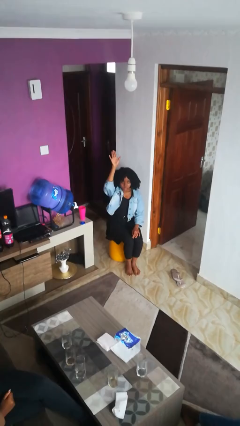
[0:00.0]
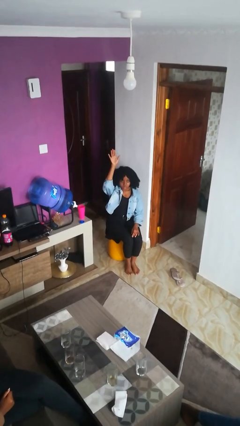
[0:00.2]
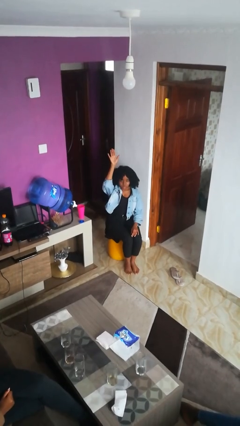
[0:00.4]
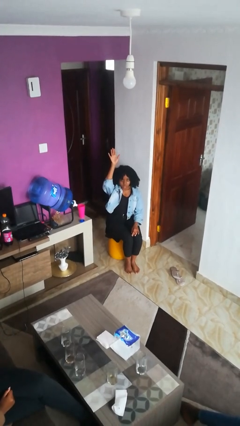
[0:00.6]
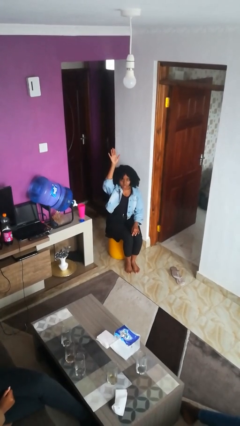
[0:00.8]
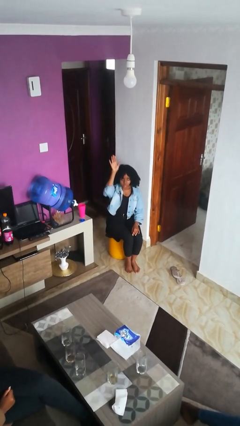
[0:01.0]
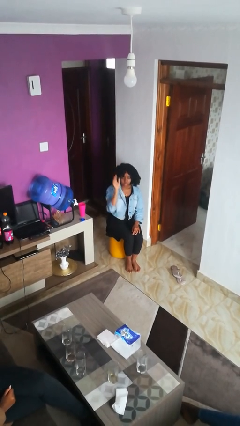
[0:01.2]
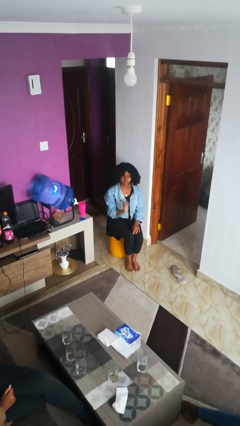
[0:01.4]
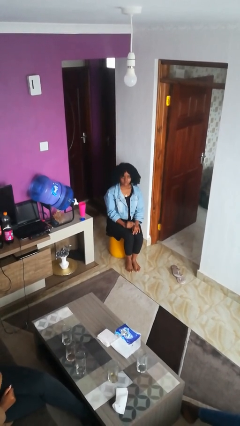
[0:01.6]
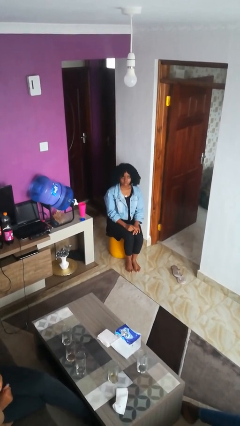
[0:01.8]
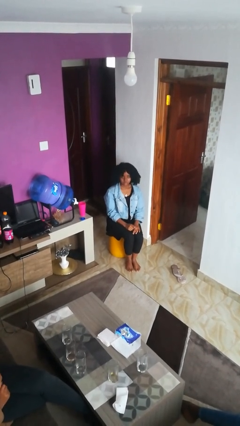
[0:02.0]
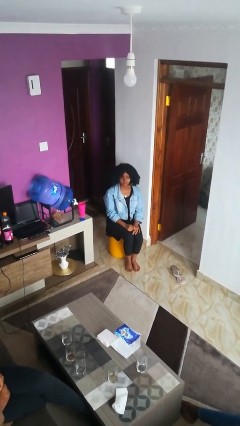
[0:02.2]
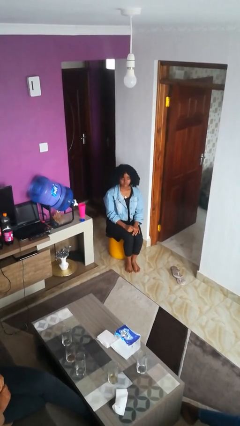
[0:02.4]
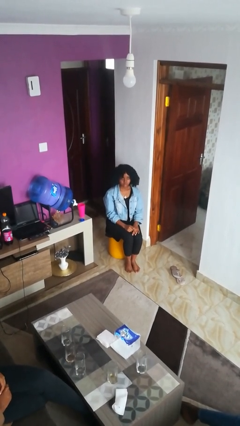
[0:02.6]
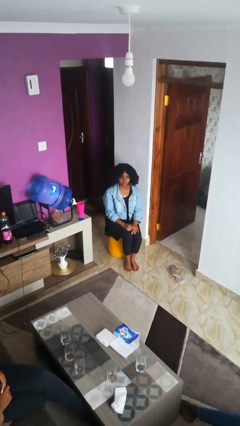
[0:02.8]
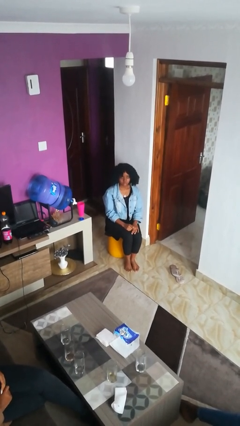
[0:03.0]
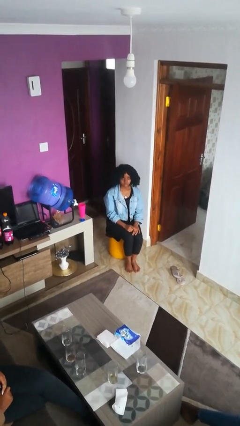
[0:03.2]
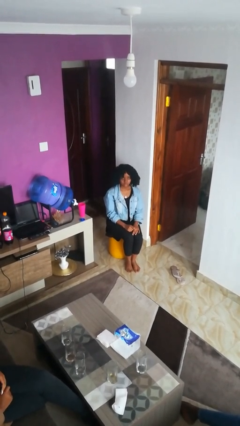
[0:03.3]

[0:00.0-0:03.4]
person gestures lower hand

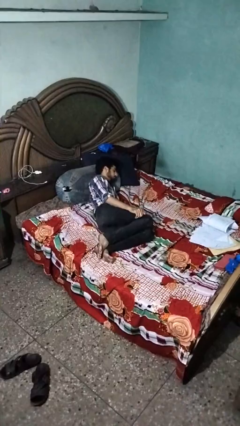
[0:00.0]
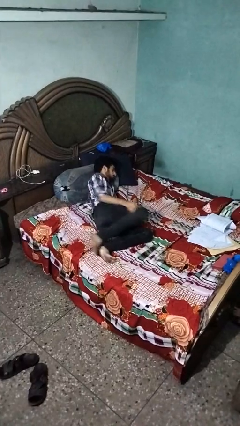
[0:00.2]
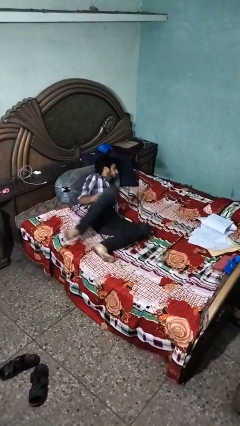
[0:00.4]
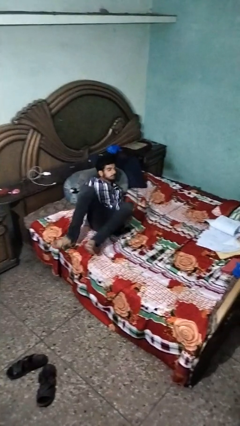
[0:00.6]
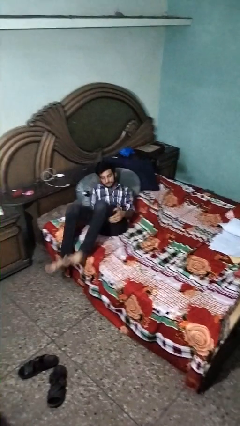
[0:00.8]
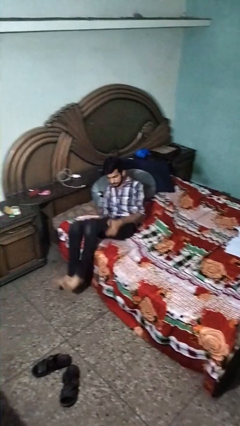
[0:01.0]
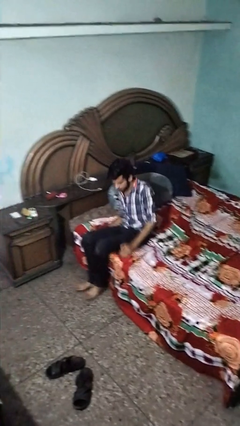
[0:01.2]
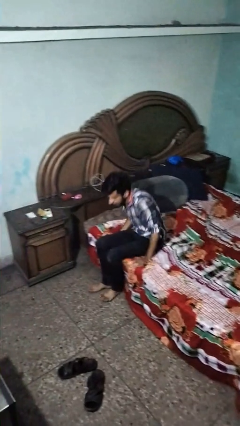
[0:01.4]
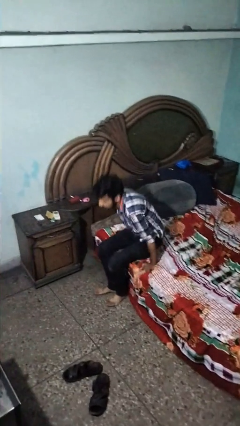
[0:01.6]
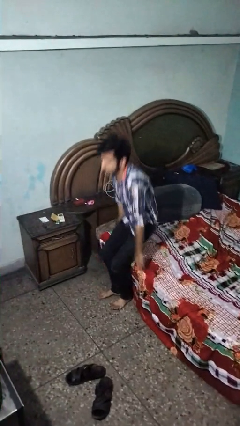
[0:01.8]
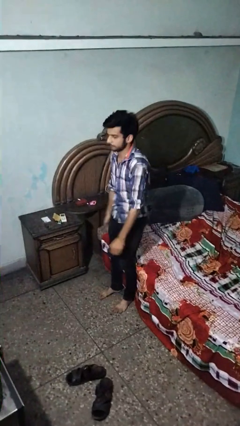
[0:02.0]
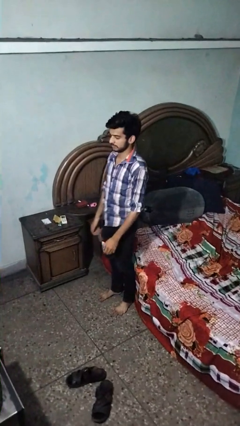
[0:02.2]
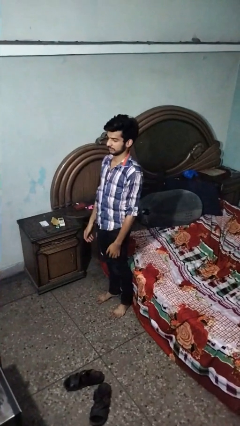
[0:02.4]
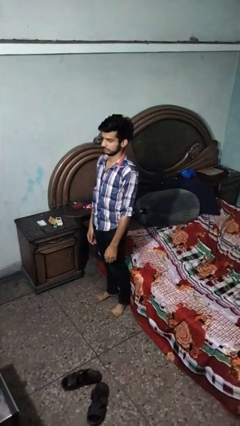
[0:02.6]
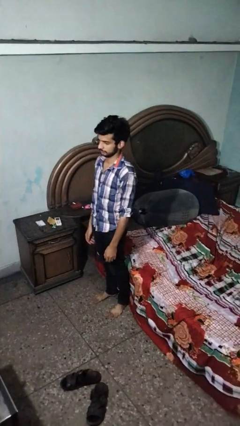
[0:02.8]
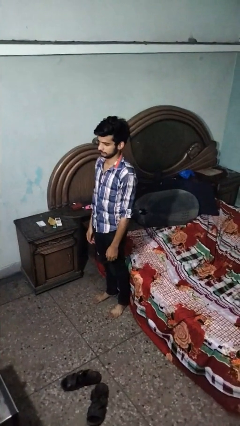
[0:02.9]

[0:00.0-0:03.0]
person stands up

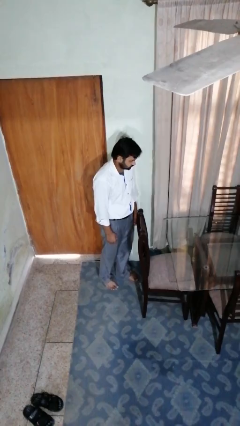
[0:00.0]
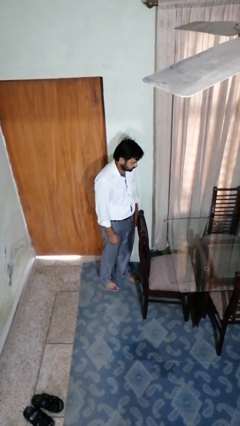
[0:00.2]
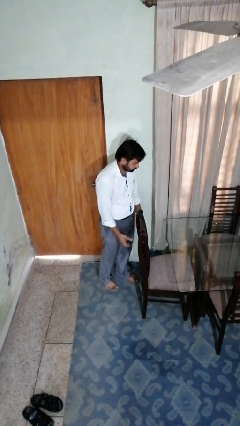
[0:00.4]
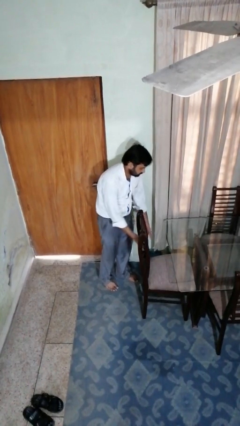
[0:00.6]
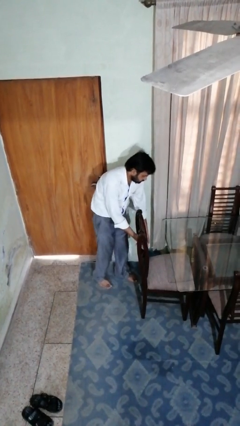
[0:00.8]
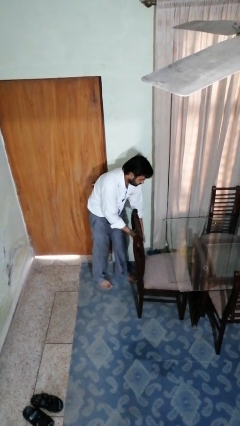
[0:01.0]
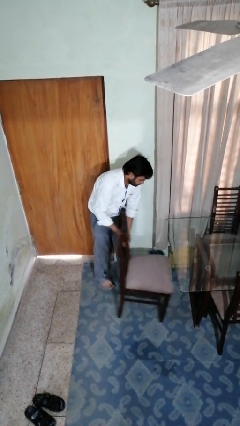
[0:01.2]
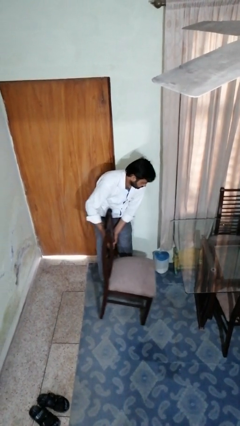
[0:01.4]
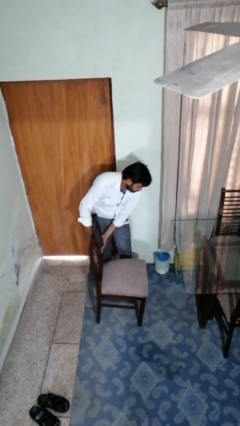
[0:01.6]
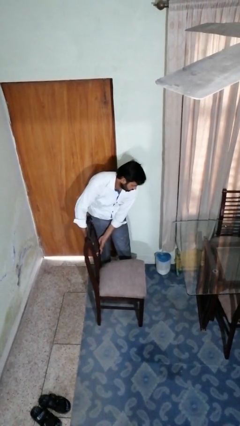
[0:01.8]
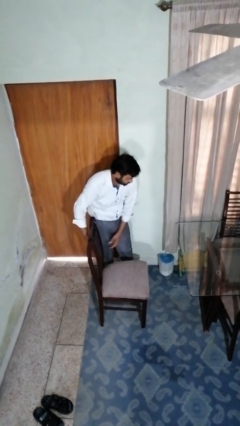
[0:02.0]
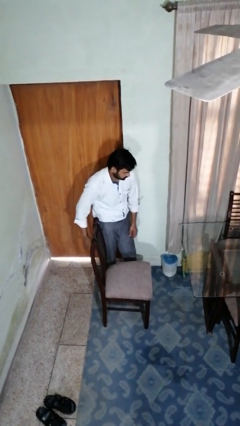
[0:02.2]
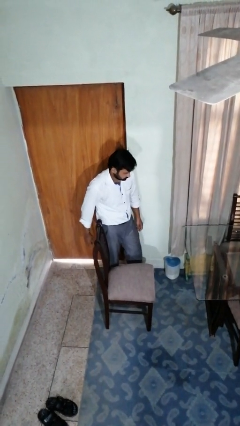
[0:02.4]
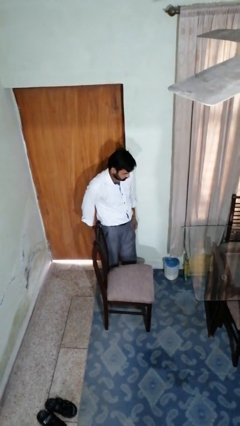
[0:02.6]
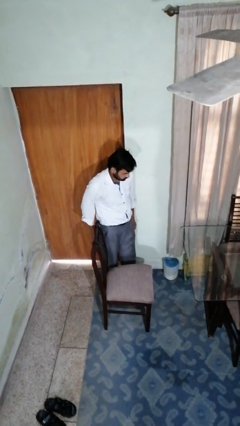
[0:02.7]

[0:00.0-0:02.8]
person pulls out chair

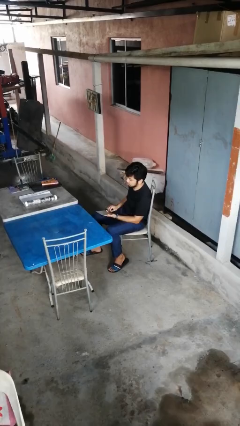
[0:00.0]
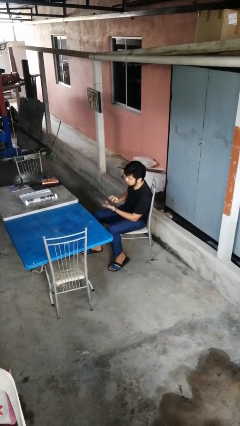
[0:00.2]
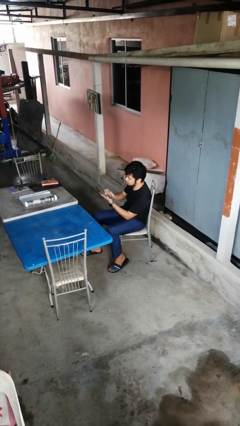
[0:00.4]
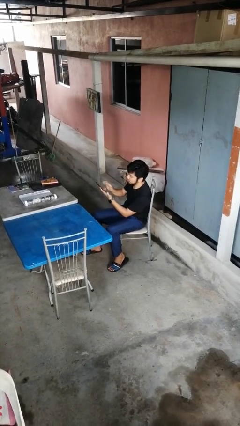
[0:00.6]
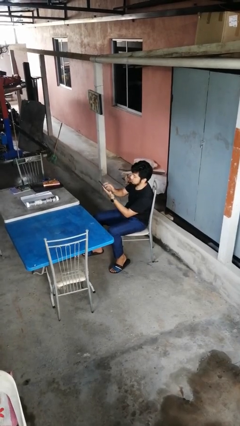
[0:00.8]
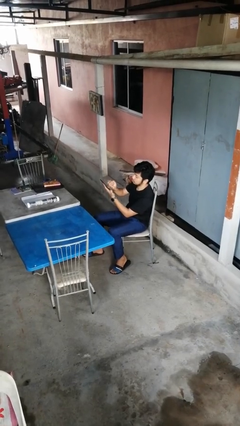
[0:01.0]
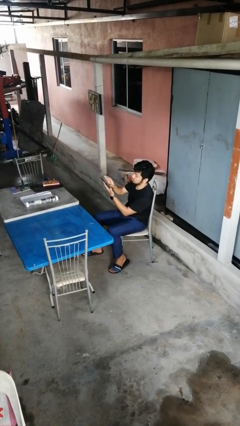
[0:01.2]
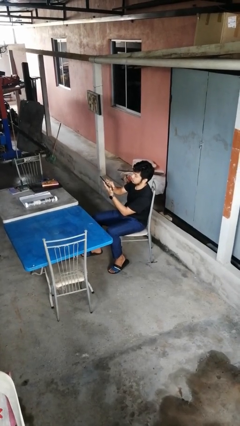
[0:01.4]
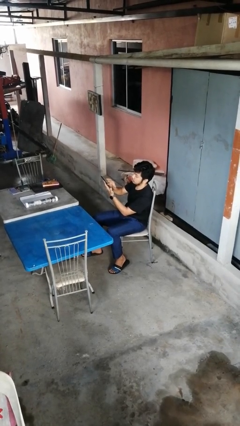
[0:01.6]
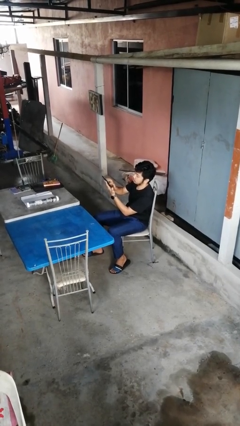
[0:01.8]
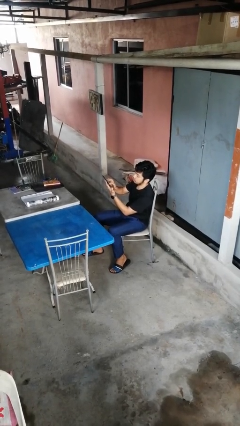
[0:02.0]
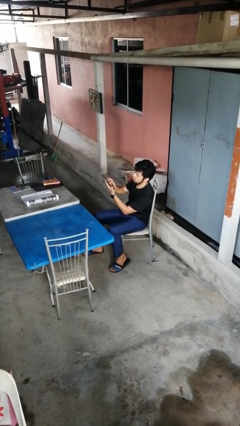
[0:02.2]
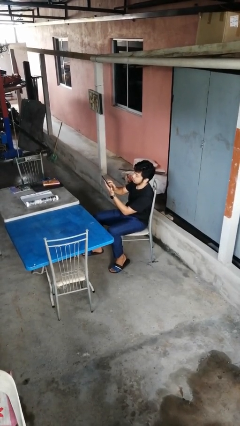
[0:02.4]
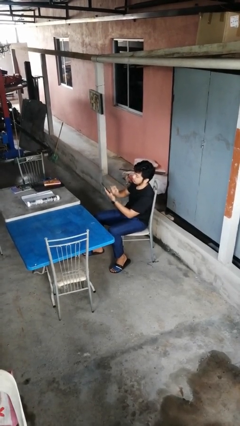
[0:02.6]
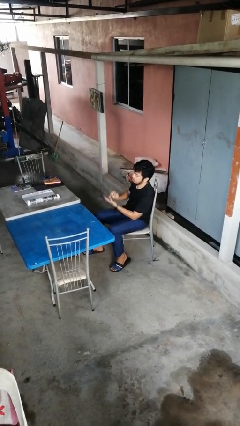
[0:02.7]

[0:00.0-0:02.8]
person interacts with tablet

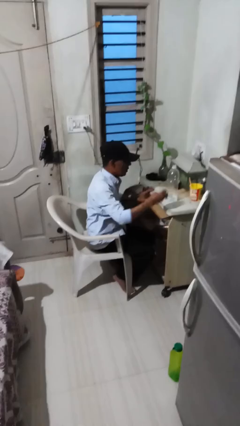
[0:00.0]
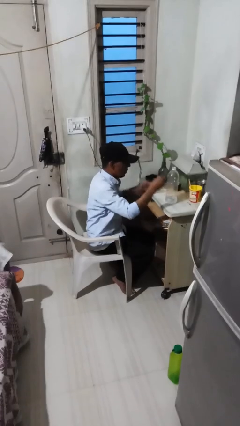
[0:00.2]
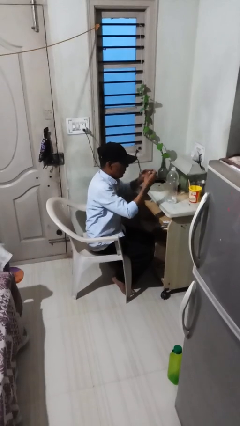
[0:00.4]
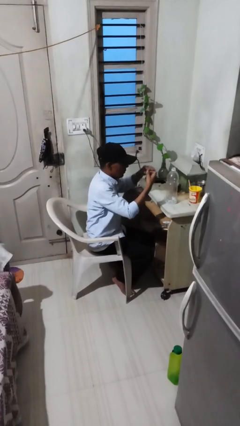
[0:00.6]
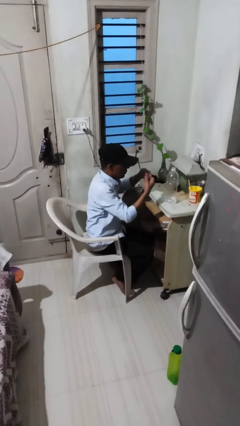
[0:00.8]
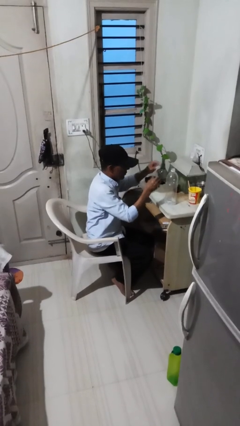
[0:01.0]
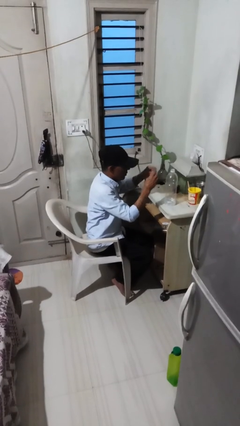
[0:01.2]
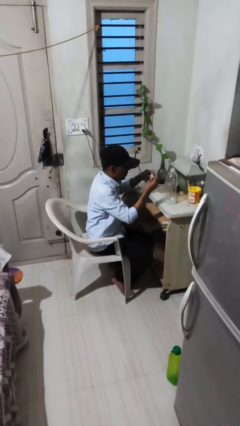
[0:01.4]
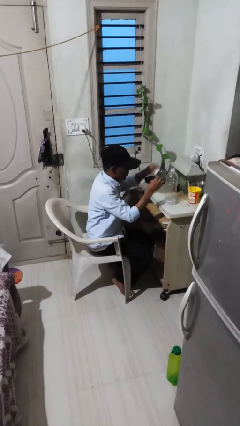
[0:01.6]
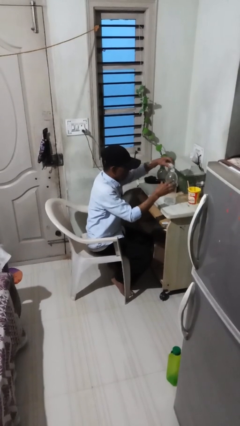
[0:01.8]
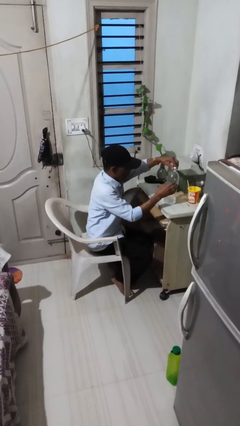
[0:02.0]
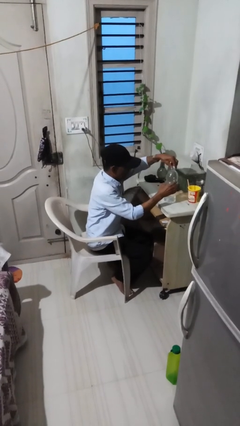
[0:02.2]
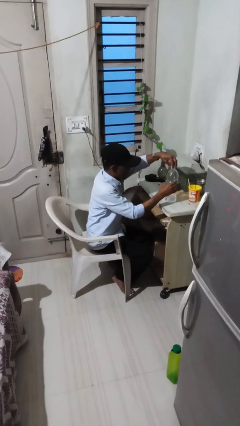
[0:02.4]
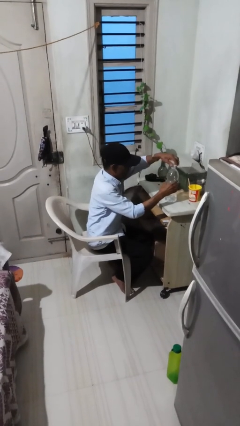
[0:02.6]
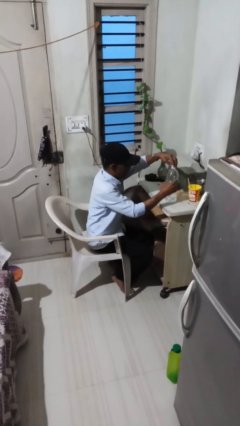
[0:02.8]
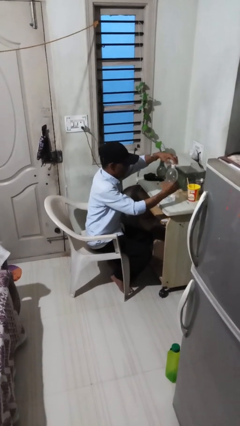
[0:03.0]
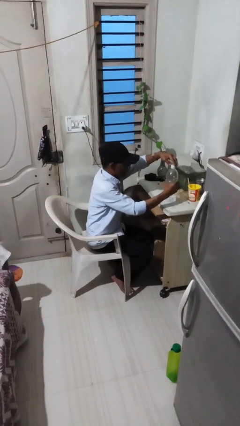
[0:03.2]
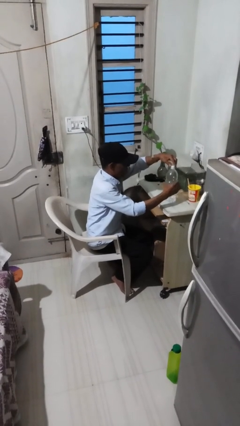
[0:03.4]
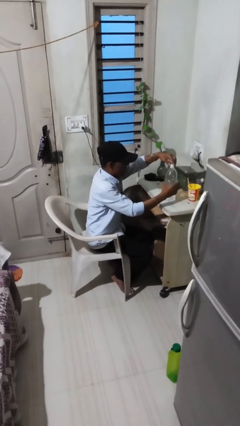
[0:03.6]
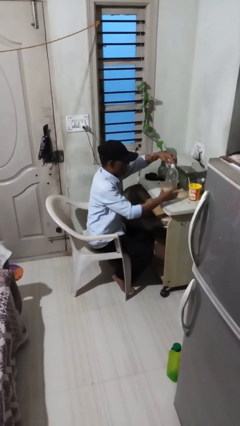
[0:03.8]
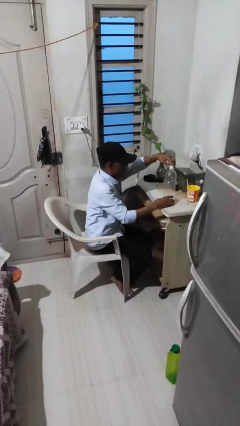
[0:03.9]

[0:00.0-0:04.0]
person screws lid to bottle

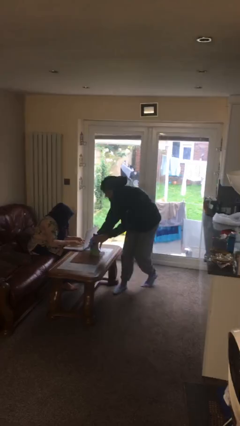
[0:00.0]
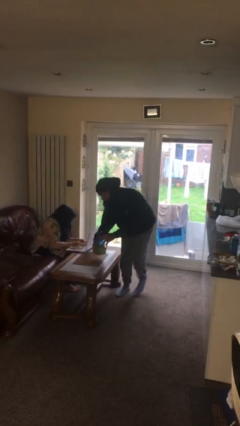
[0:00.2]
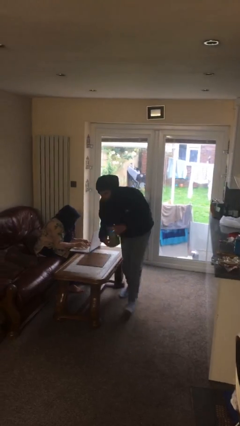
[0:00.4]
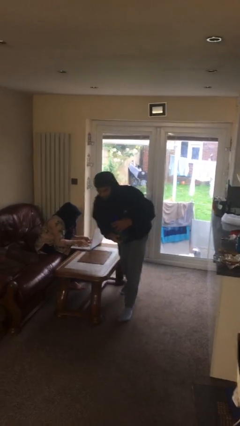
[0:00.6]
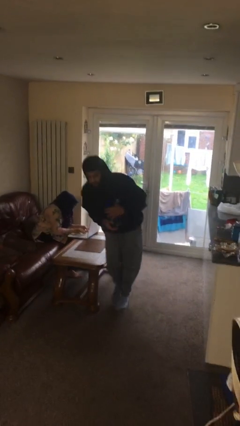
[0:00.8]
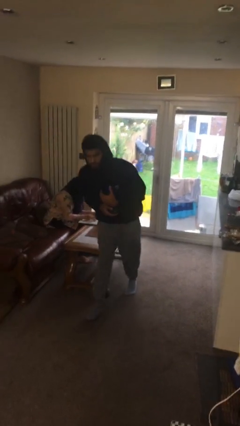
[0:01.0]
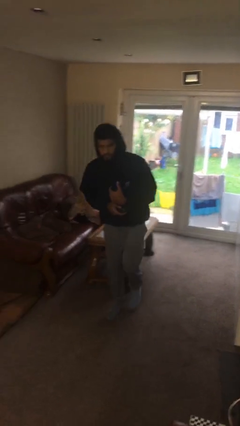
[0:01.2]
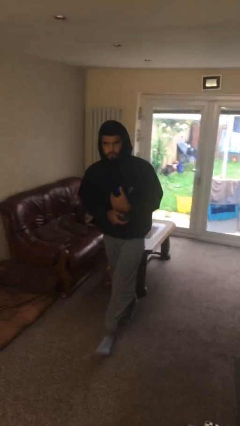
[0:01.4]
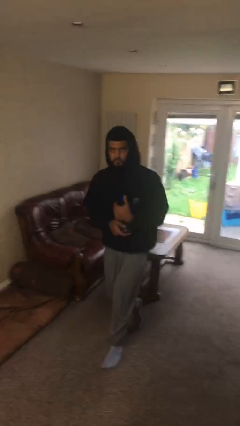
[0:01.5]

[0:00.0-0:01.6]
person steals object from person
